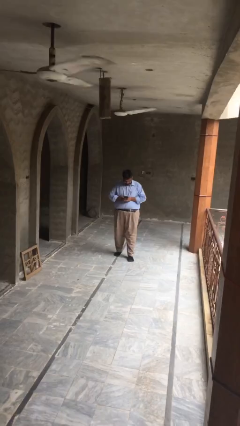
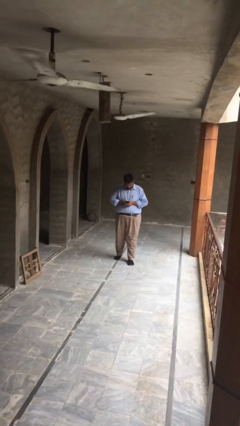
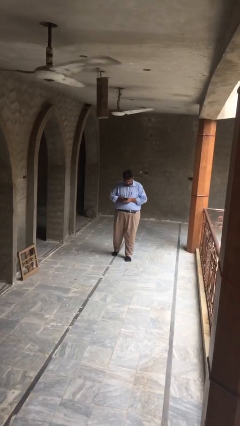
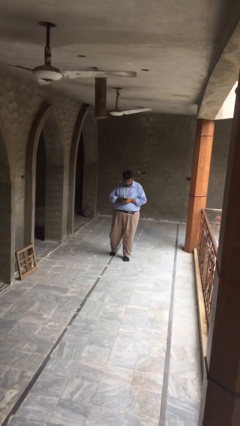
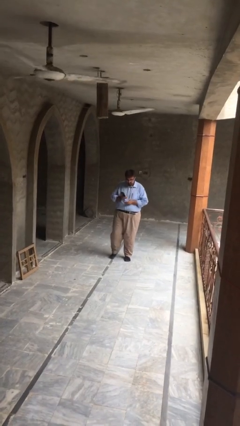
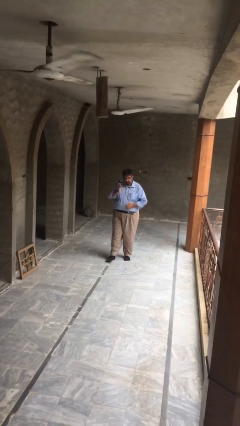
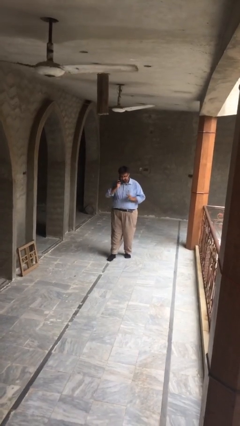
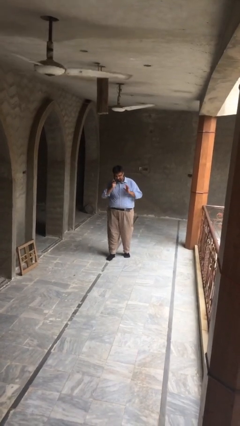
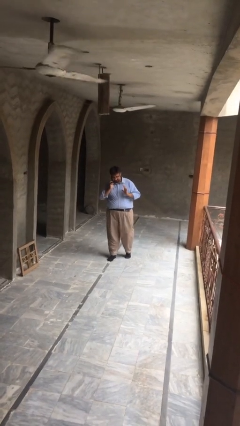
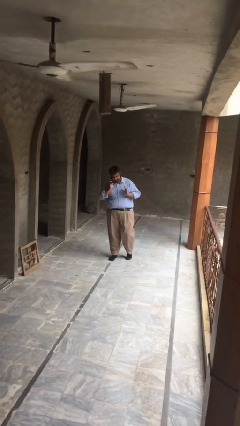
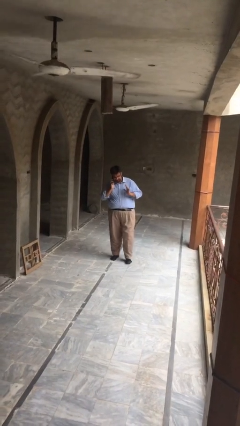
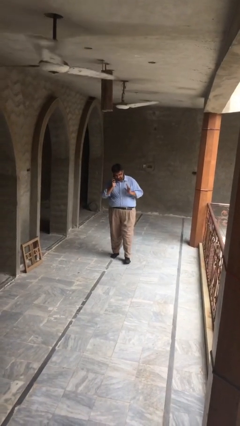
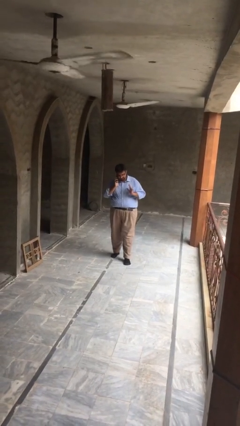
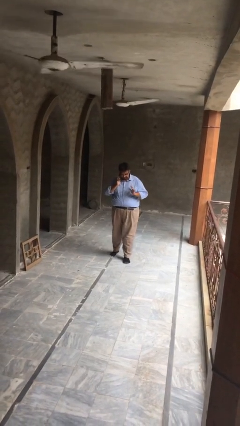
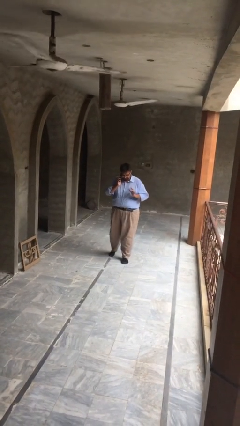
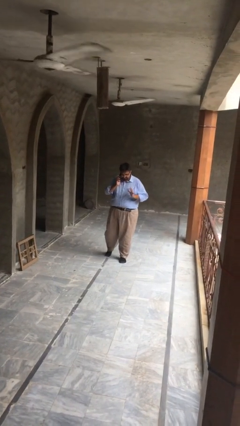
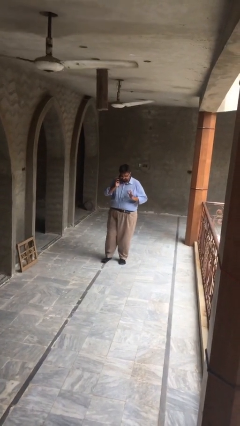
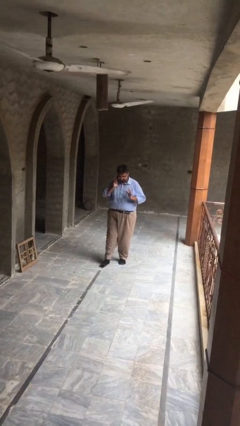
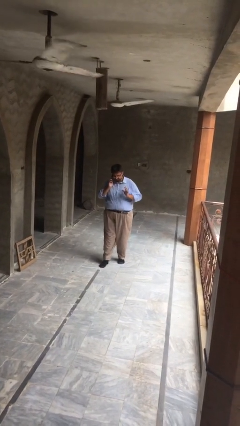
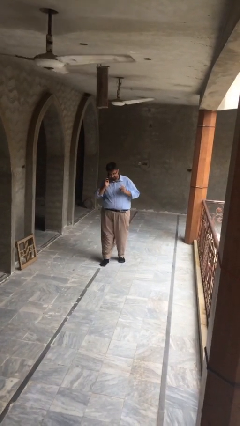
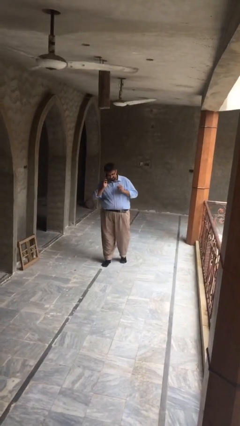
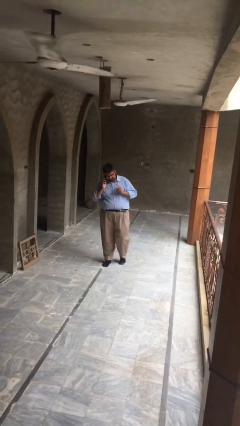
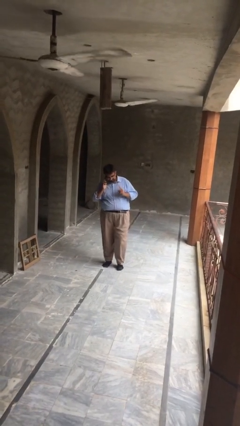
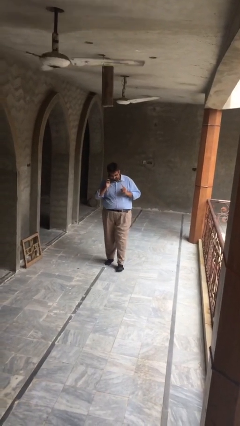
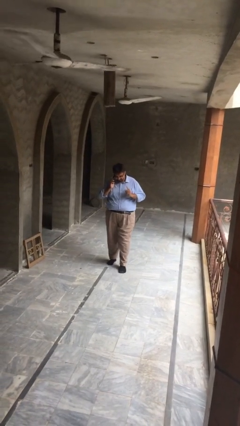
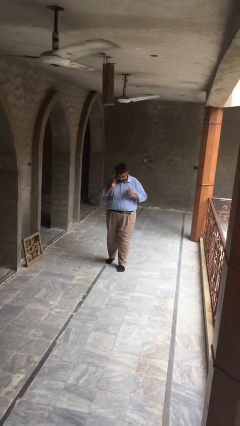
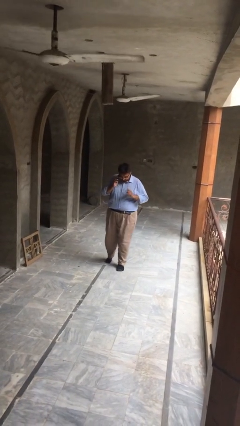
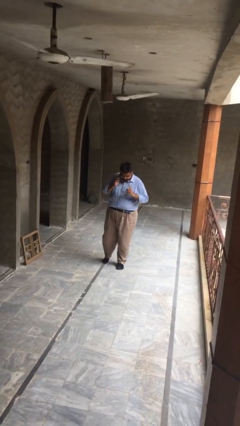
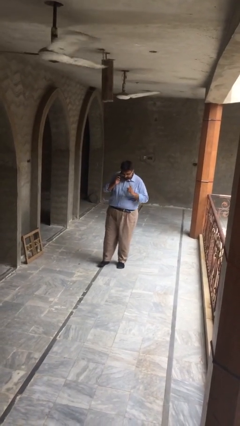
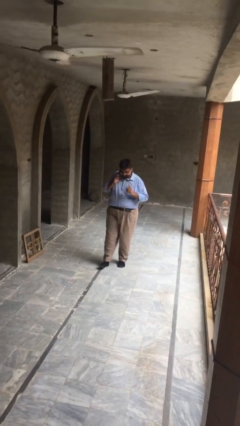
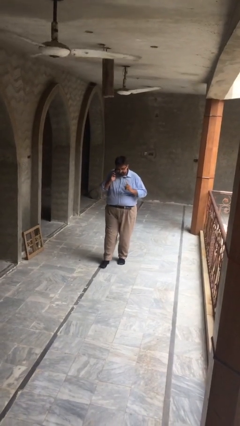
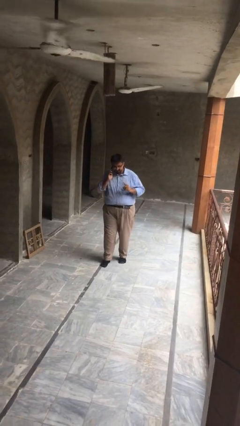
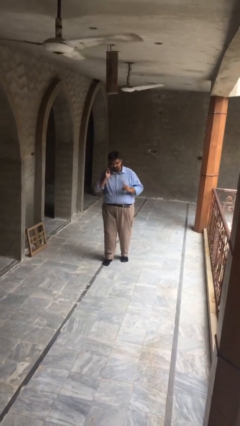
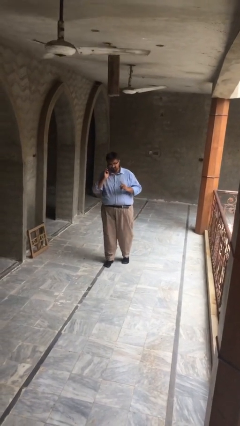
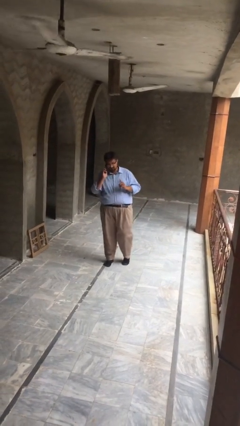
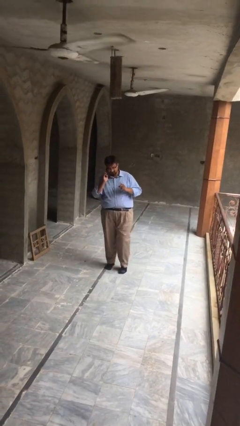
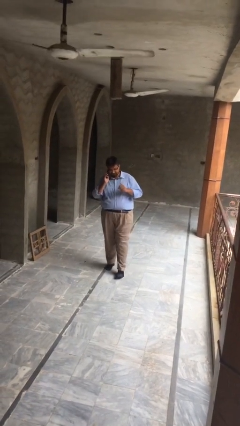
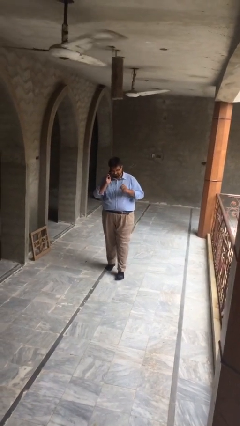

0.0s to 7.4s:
person talks on phone

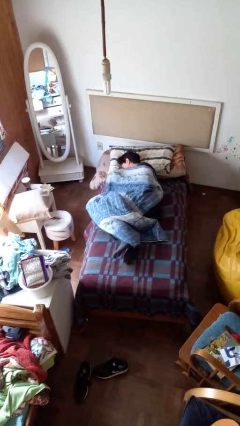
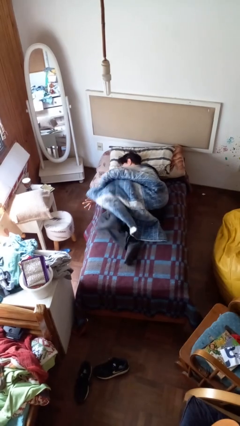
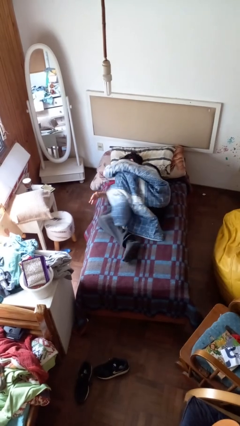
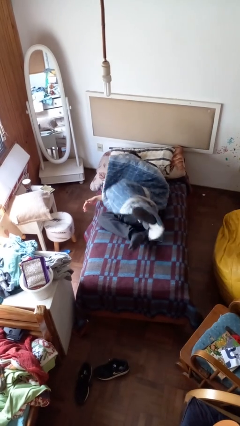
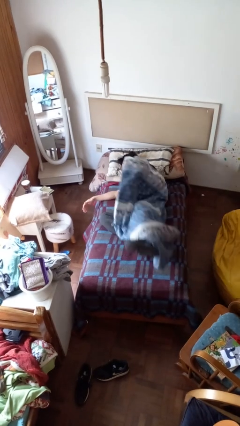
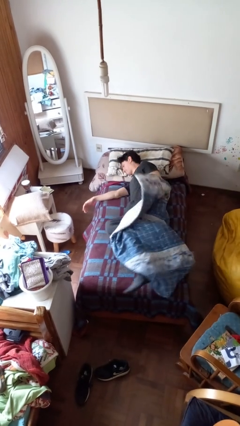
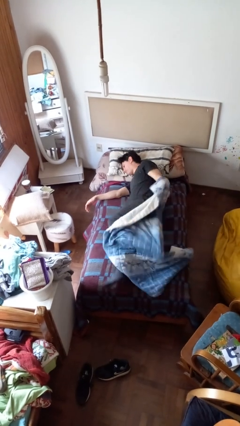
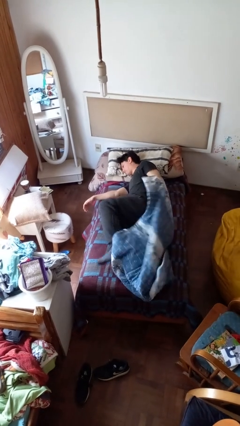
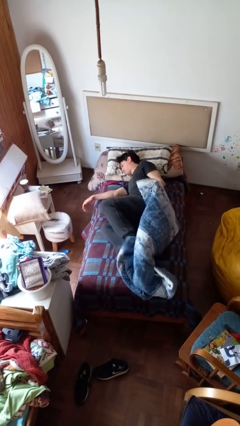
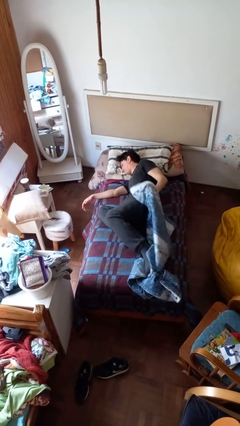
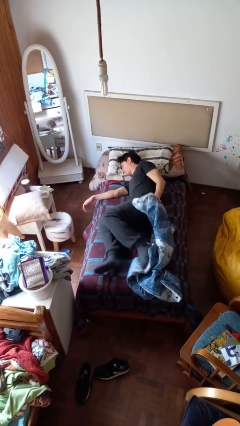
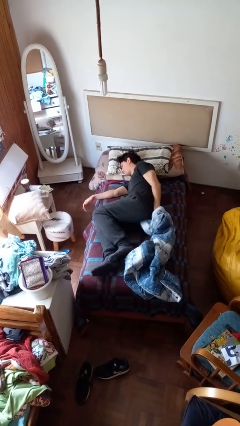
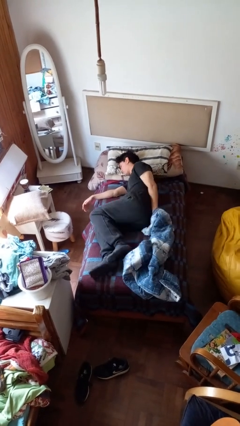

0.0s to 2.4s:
person uncovers with bedsheets

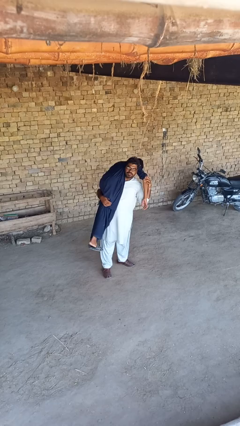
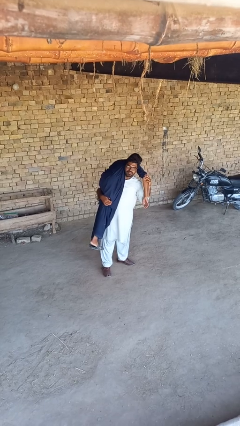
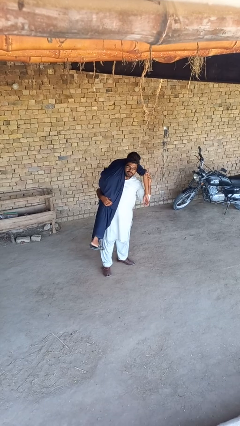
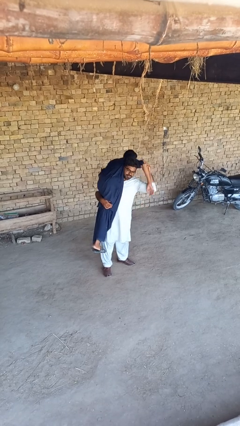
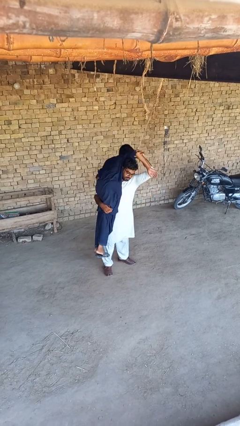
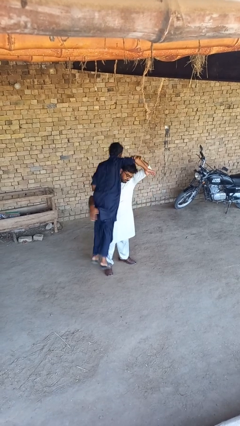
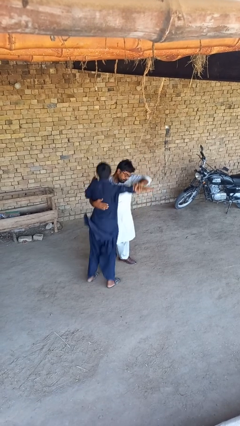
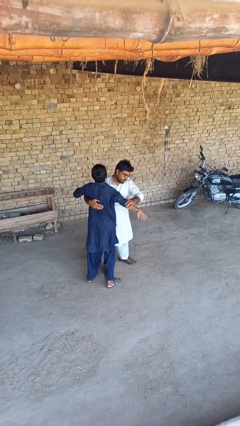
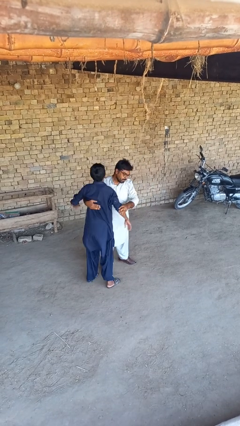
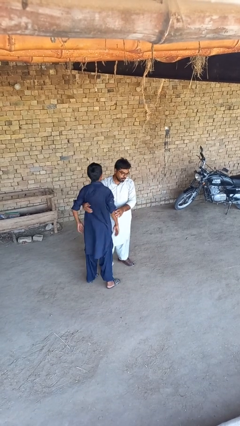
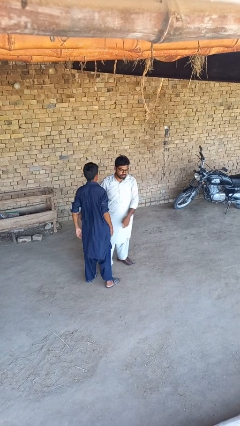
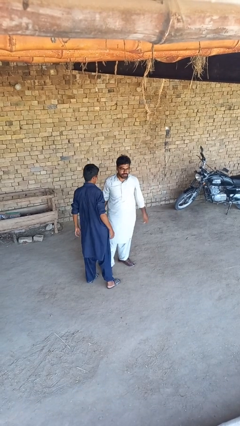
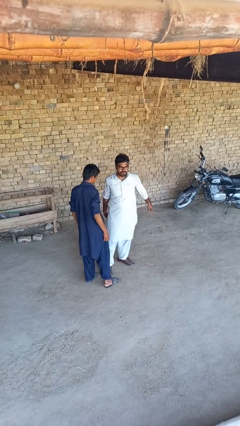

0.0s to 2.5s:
person puts down person

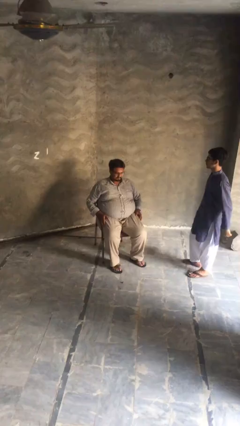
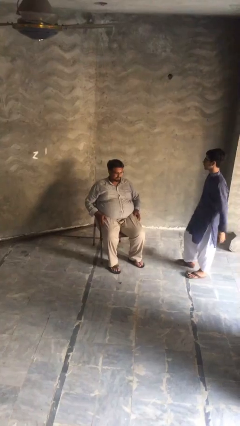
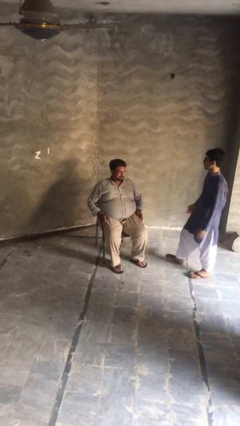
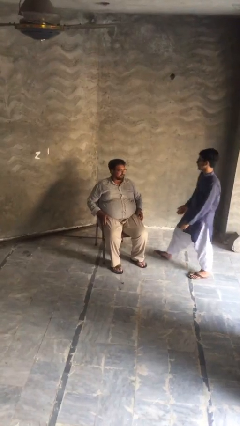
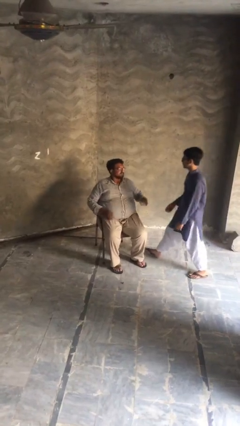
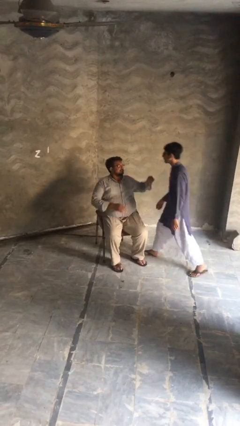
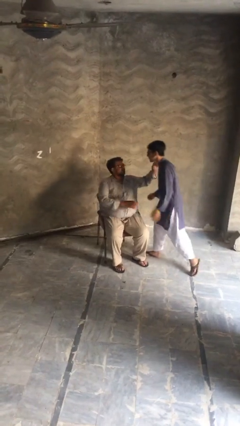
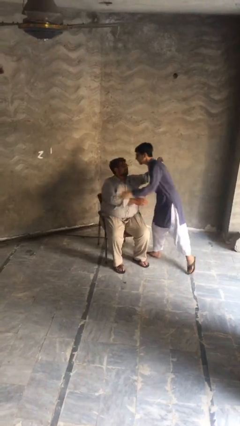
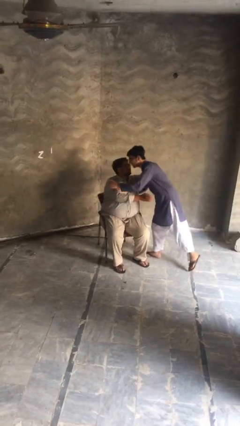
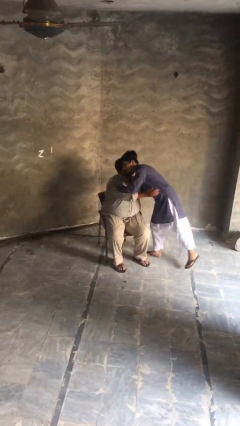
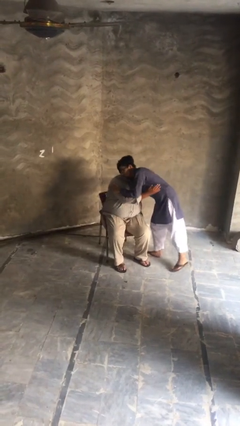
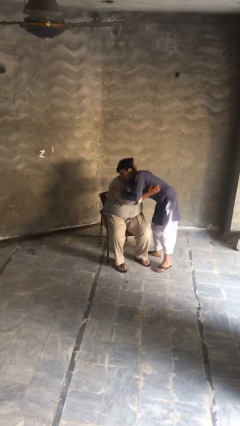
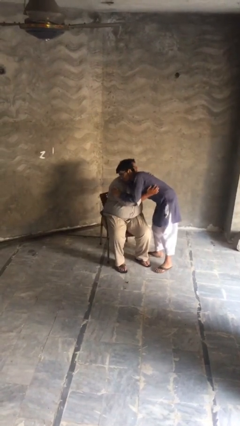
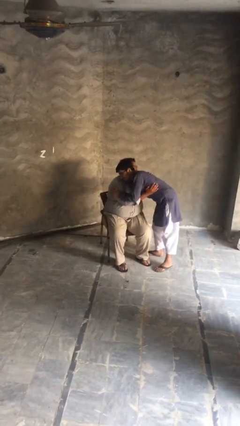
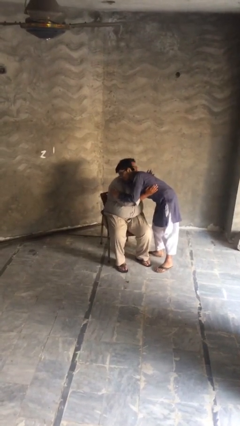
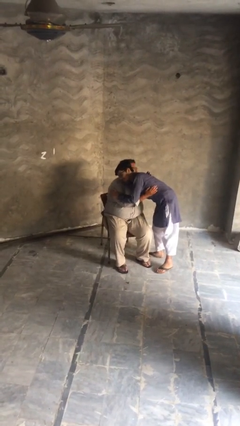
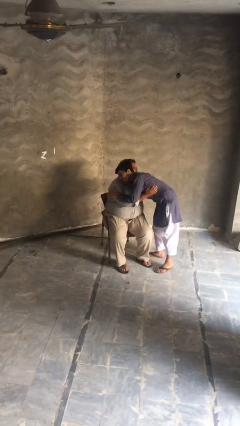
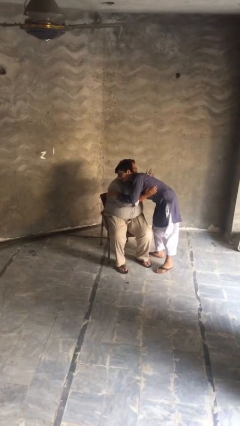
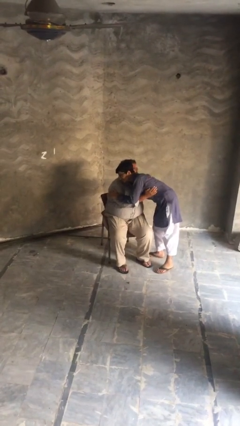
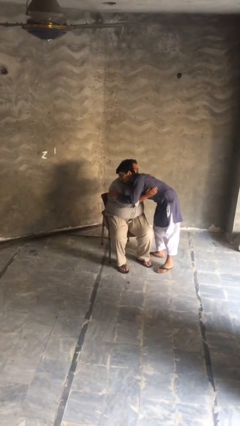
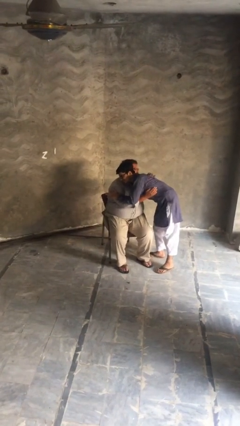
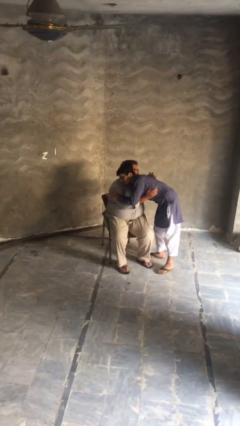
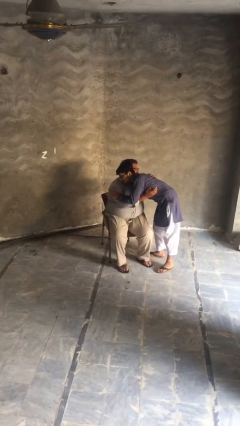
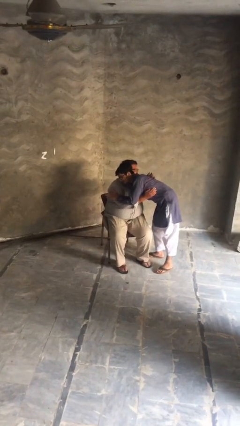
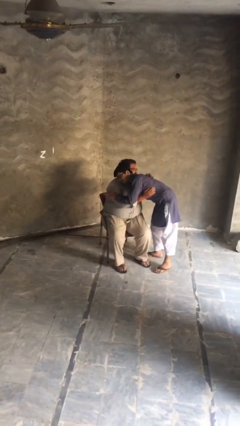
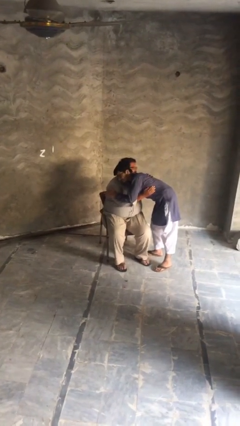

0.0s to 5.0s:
person embraces person
